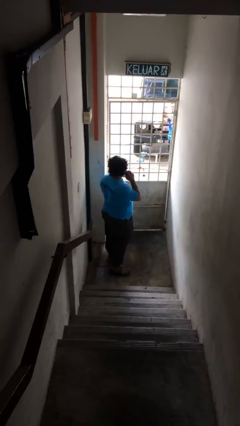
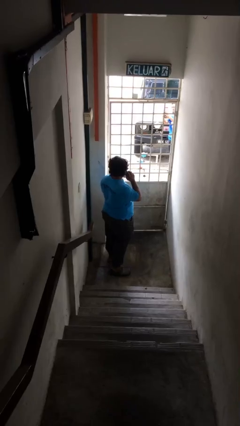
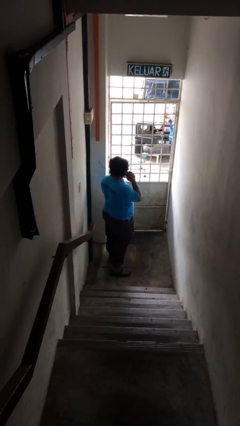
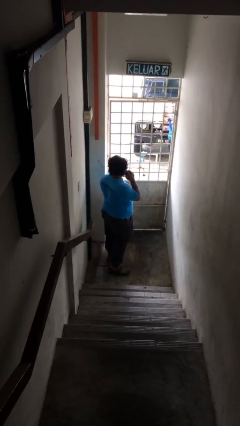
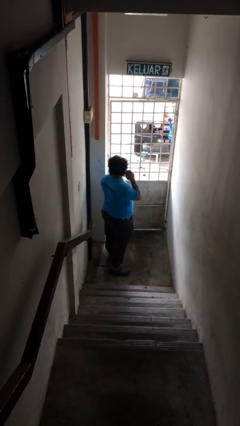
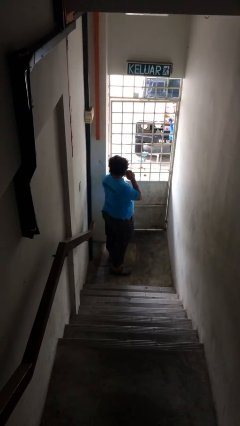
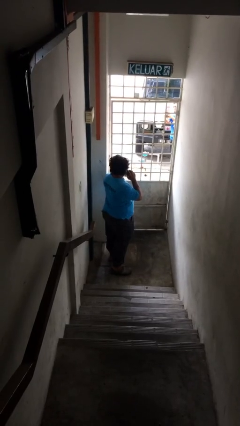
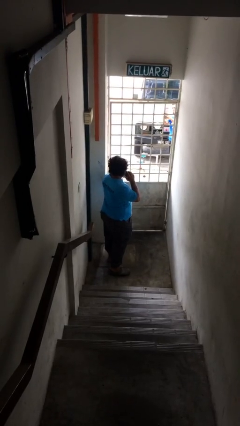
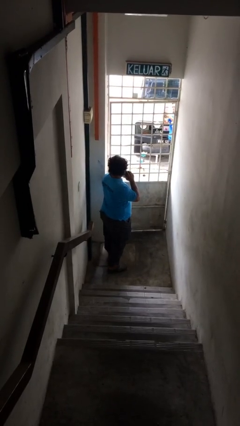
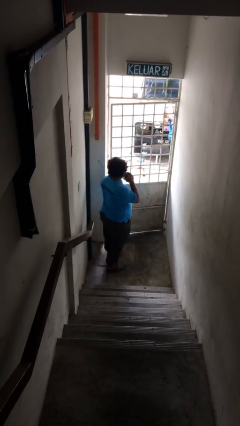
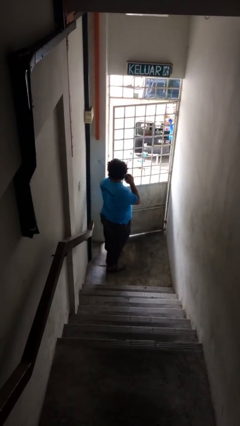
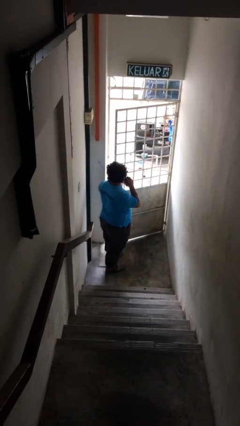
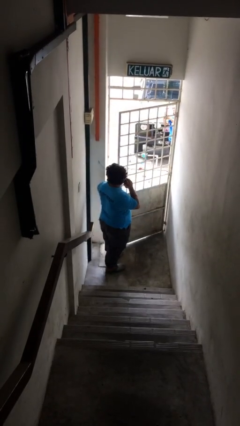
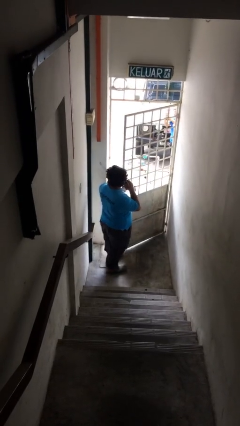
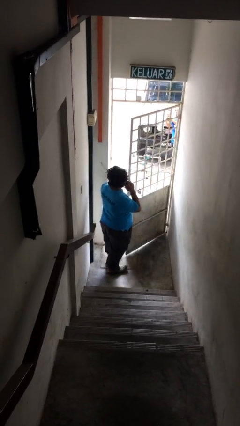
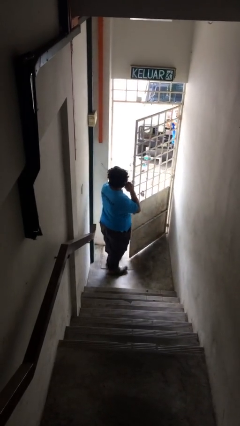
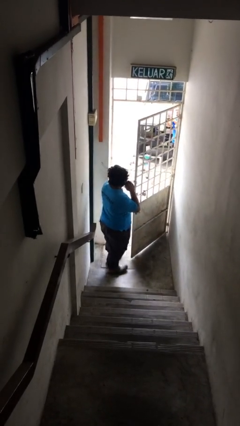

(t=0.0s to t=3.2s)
person opens facility door

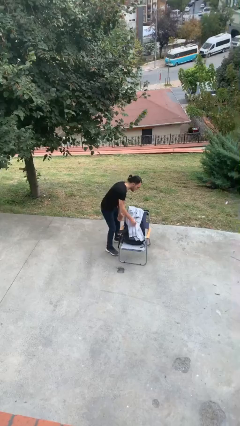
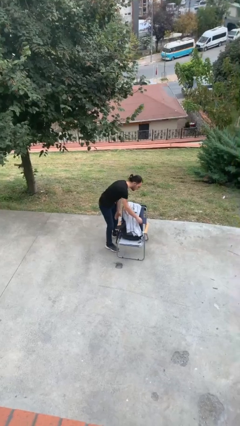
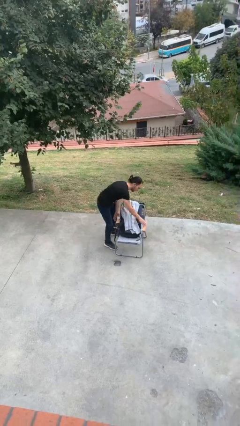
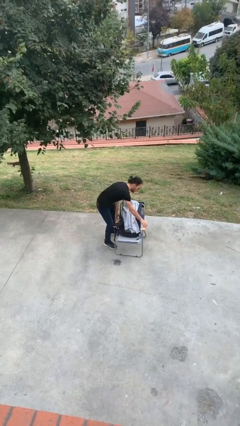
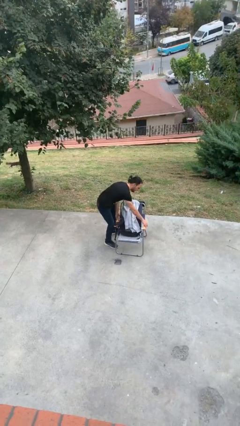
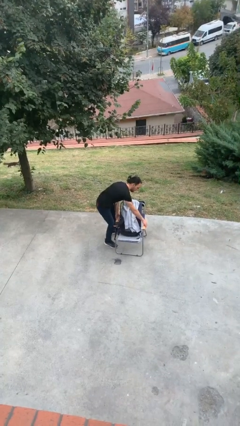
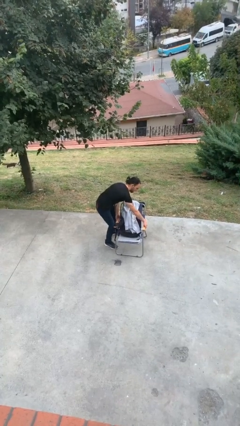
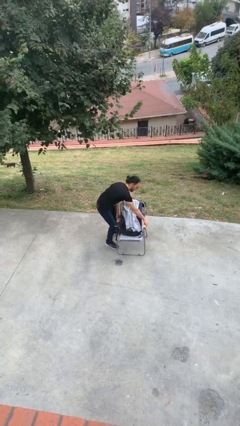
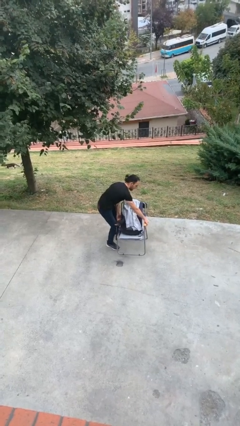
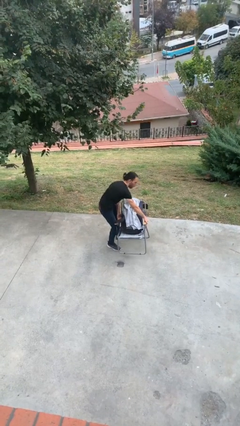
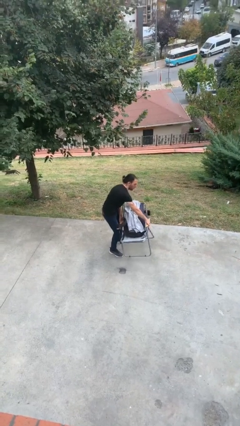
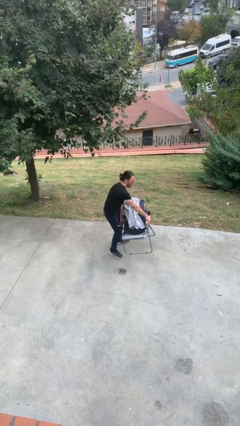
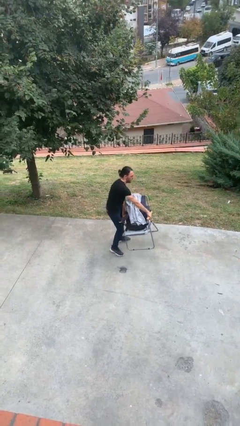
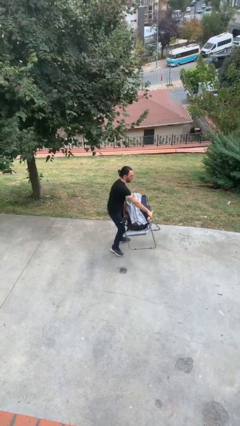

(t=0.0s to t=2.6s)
person picks up object from floor

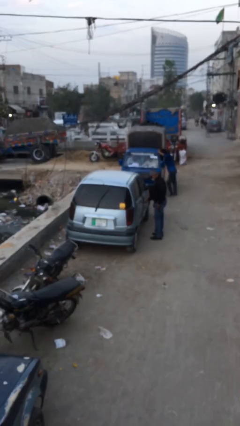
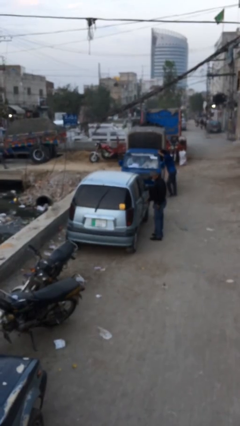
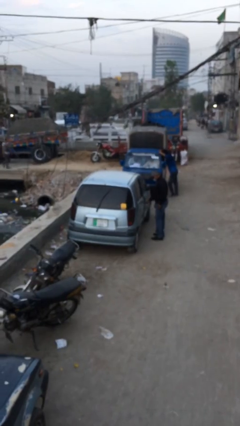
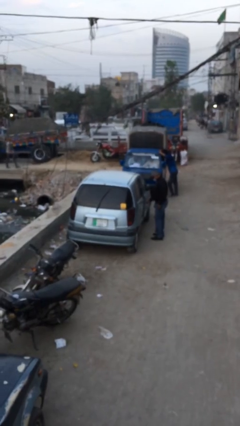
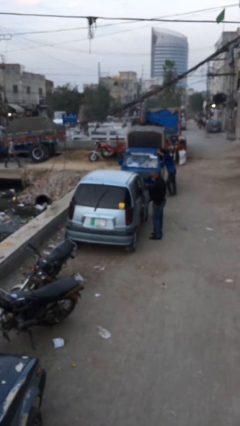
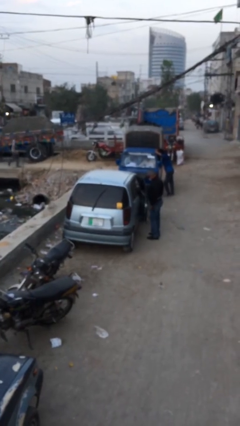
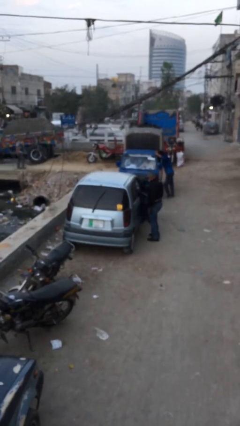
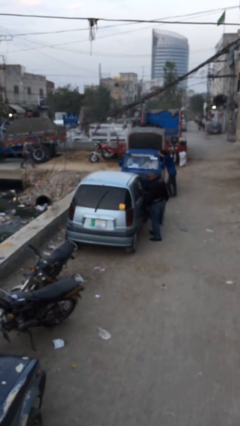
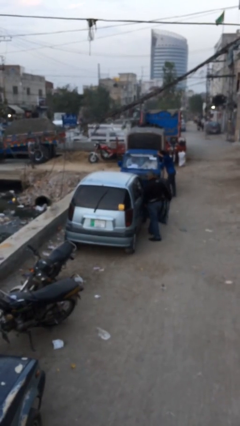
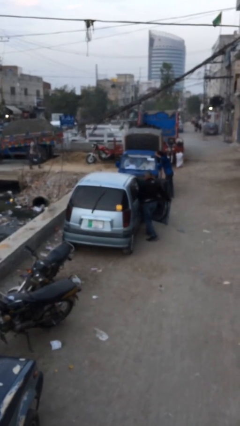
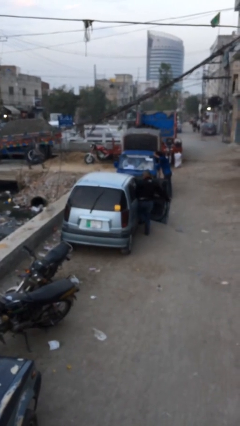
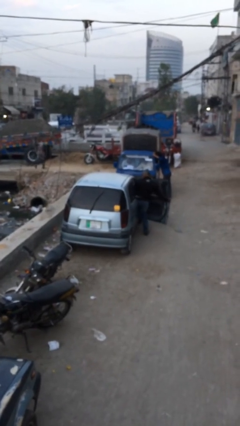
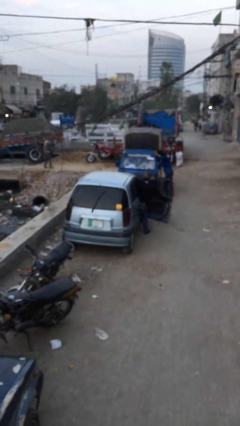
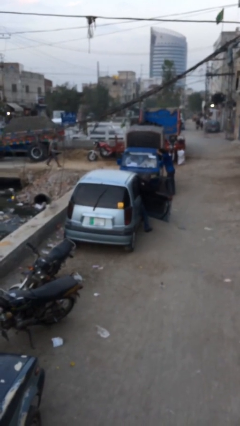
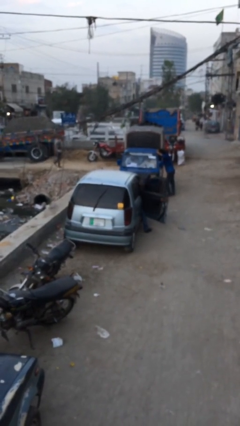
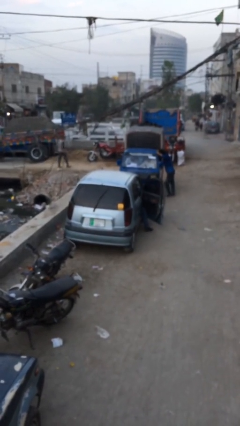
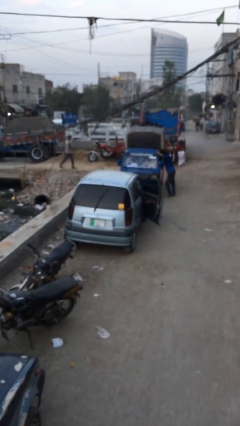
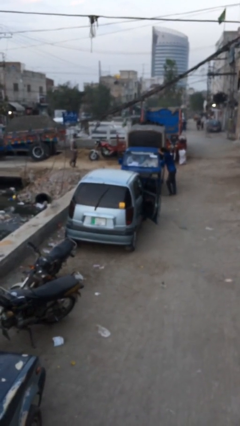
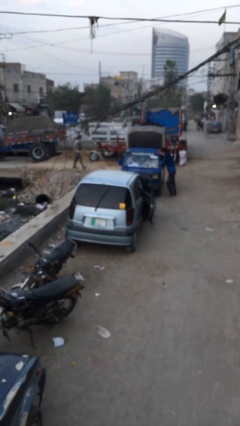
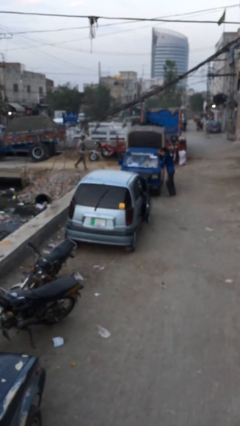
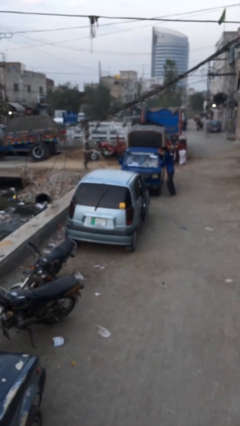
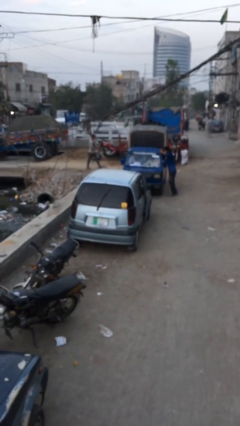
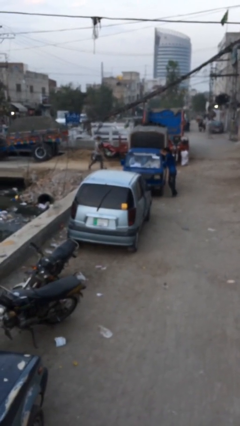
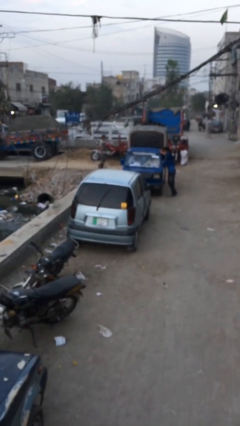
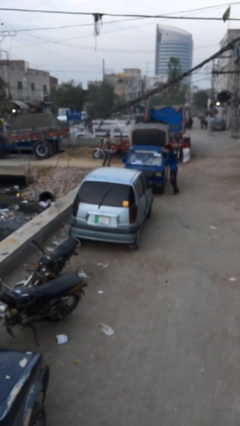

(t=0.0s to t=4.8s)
car picks up person

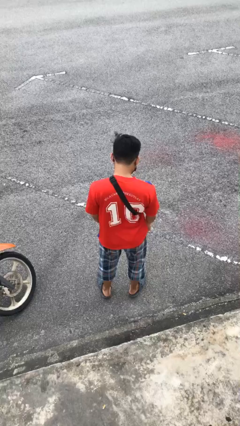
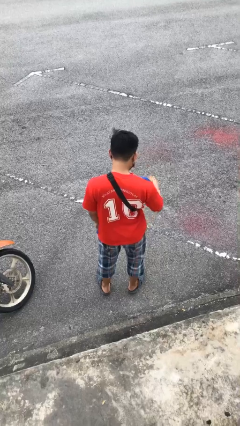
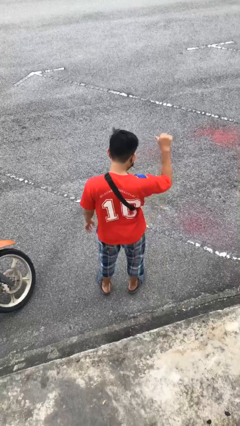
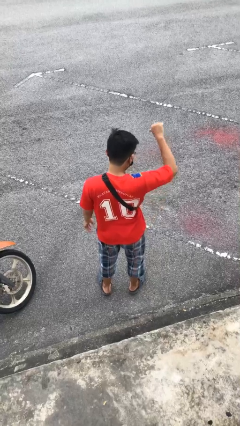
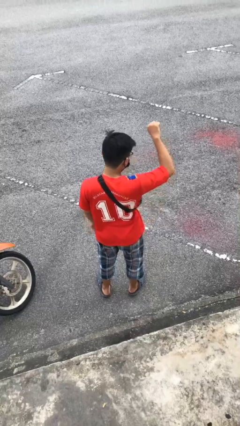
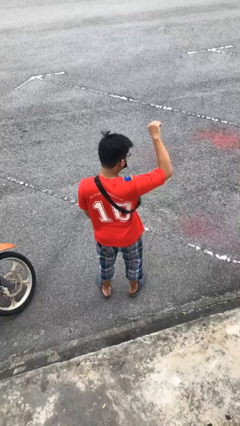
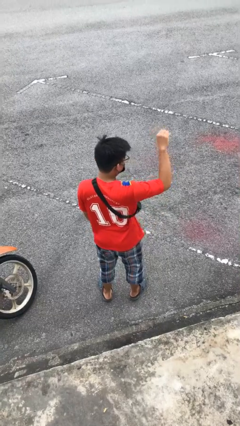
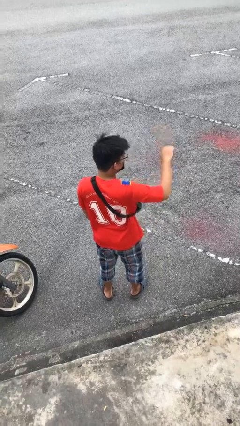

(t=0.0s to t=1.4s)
person gestures thumbs down

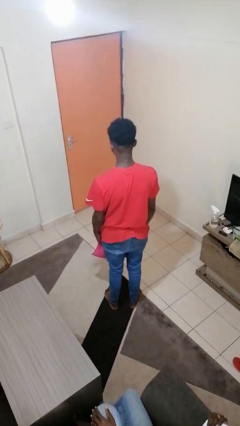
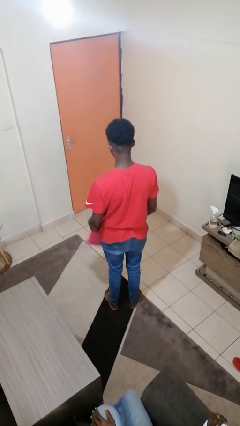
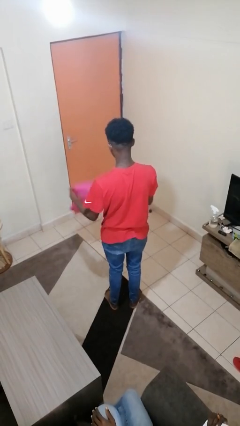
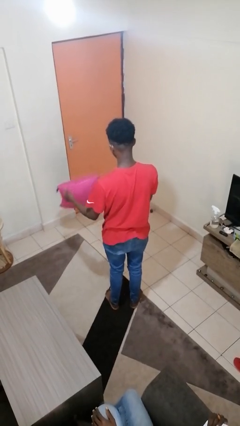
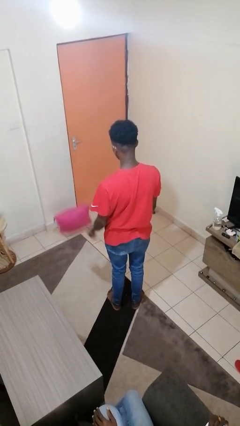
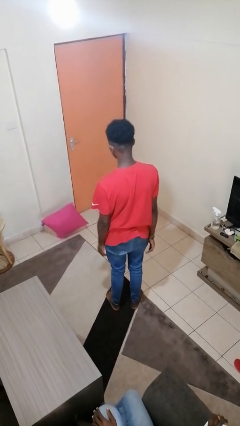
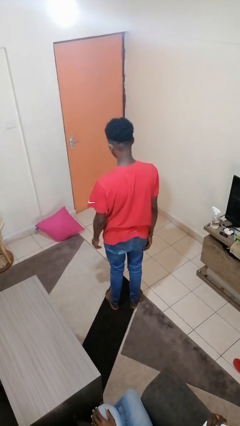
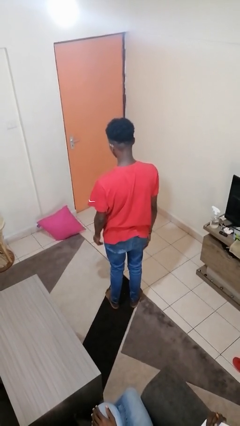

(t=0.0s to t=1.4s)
person throws object to ground

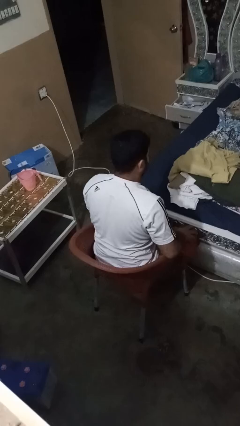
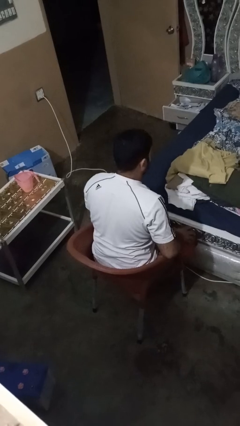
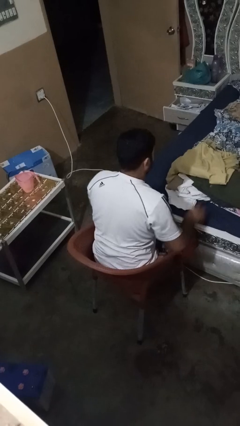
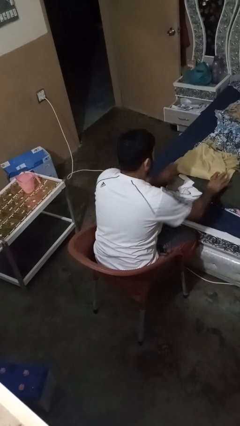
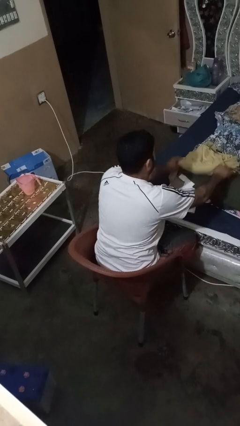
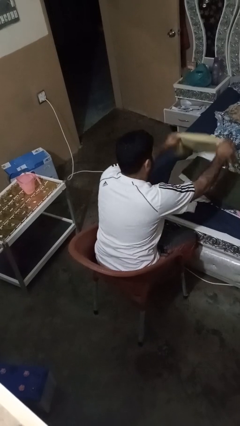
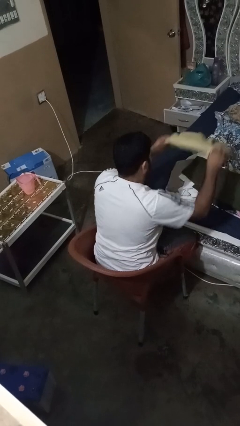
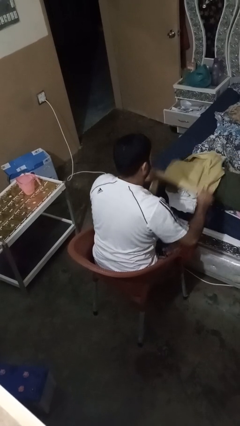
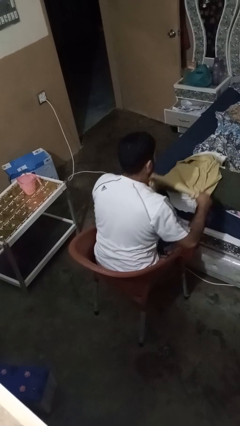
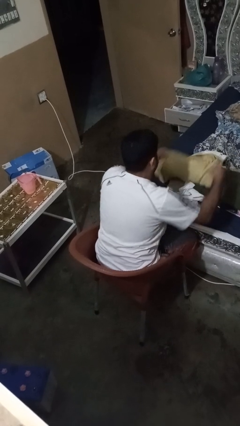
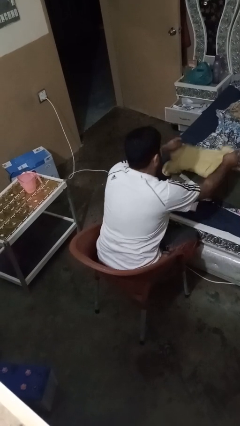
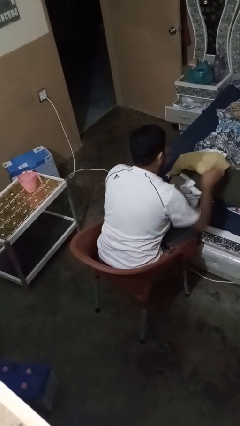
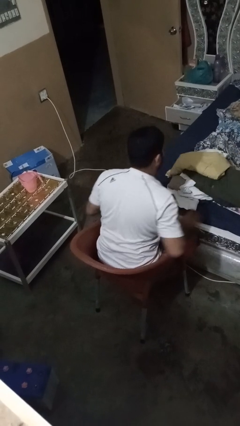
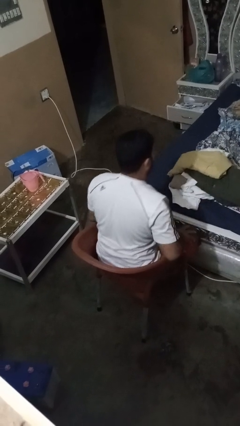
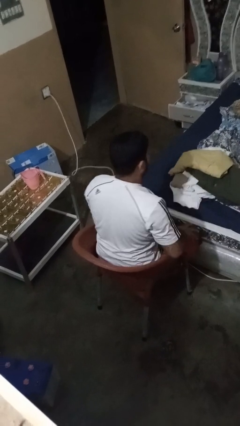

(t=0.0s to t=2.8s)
person folds shirt

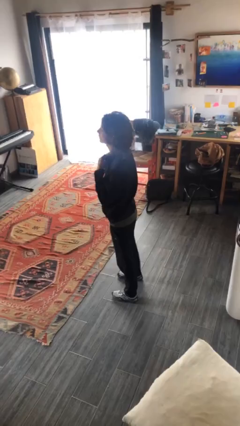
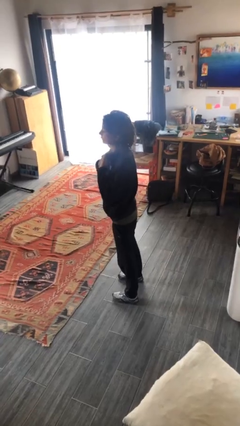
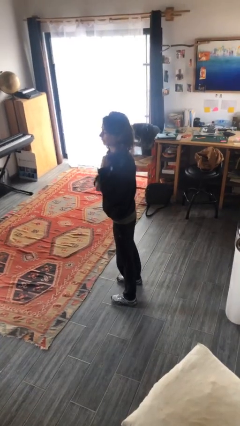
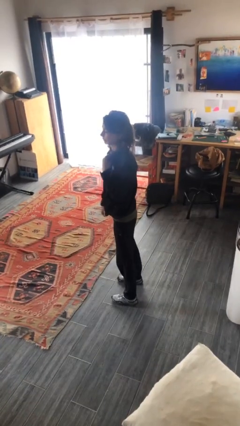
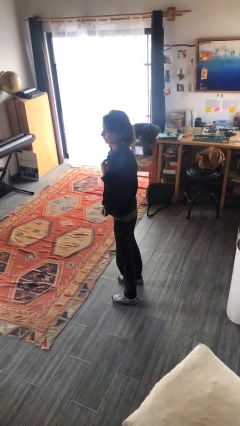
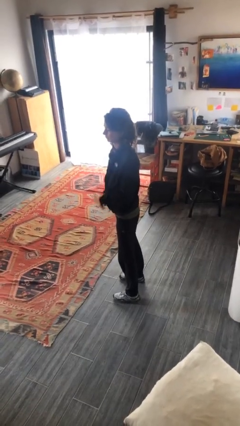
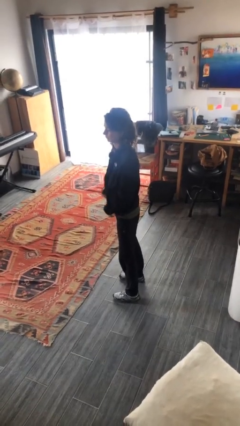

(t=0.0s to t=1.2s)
person unzips jacket
